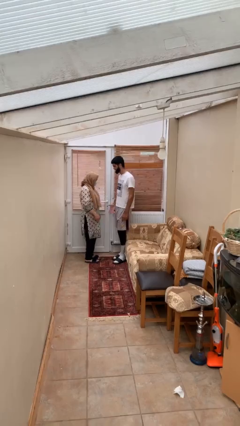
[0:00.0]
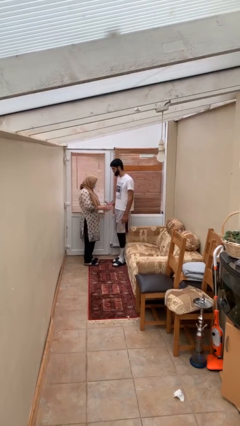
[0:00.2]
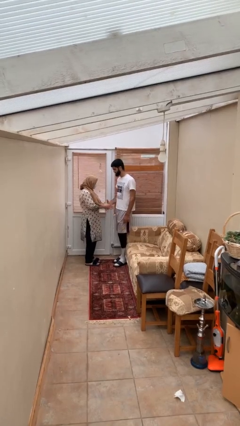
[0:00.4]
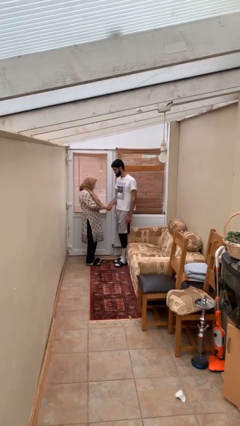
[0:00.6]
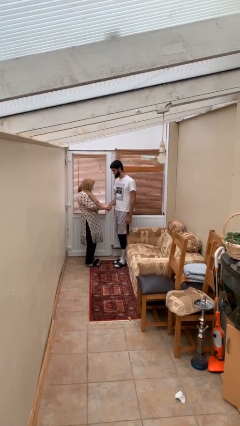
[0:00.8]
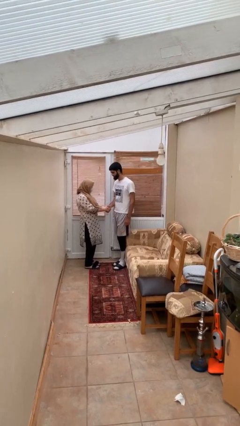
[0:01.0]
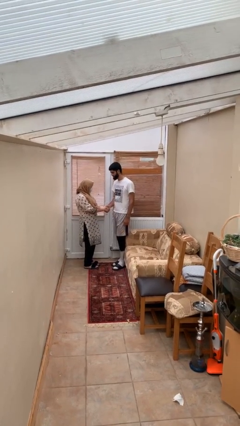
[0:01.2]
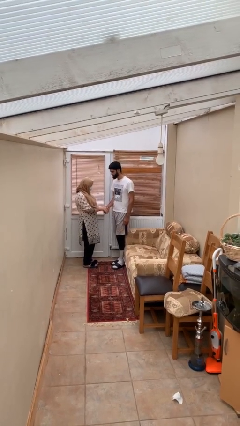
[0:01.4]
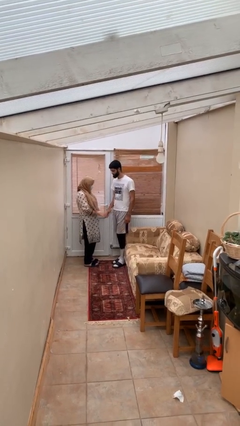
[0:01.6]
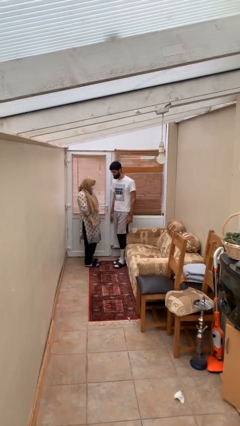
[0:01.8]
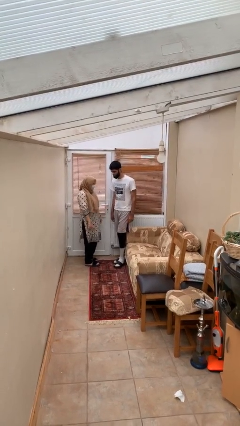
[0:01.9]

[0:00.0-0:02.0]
person shakes hand

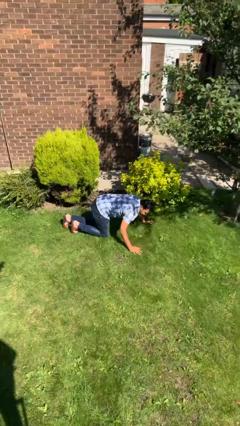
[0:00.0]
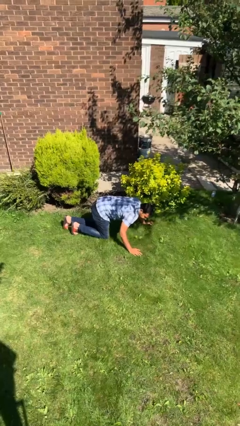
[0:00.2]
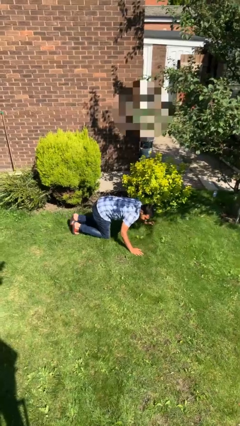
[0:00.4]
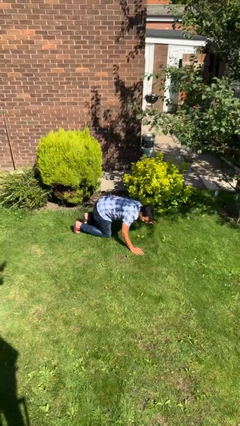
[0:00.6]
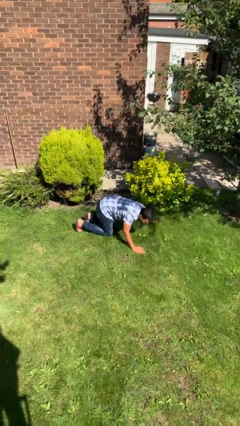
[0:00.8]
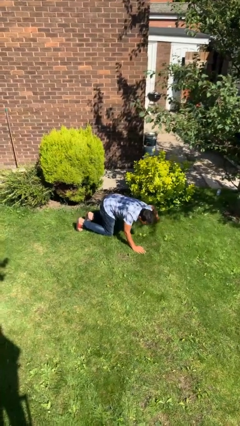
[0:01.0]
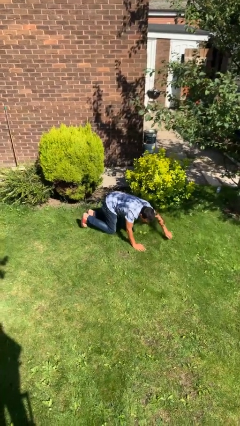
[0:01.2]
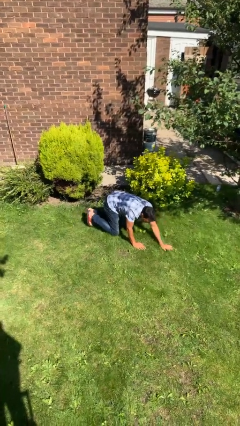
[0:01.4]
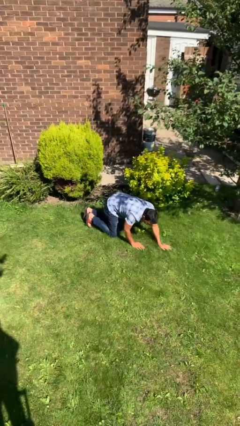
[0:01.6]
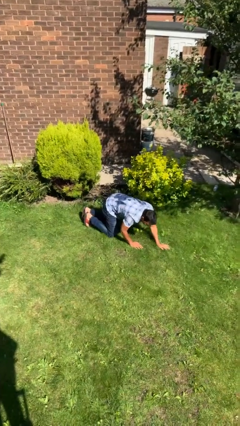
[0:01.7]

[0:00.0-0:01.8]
person crawls

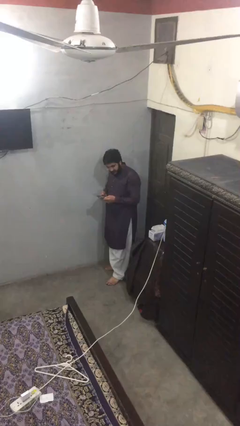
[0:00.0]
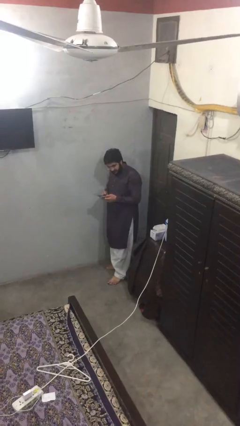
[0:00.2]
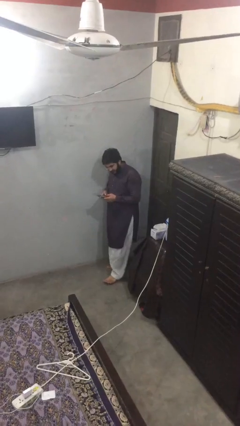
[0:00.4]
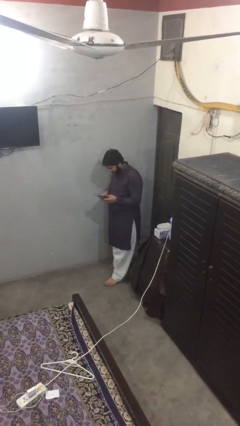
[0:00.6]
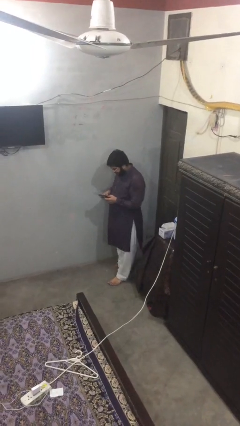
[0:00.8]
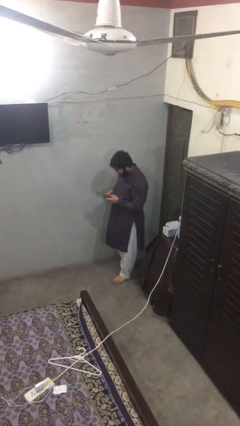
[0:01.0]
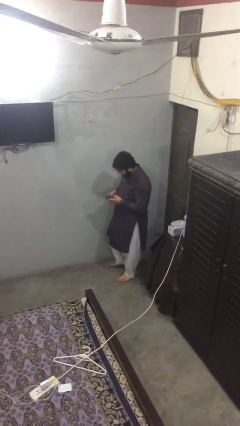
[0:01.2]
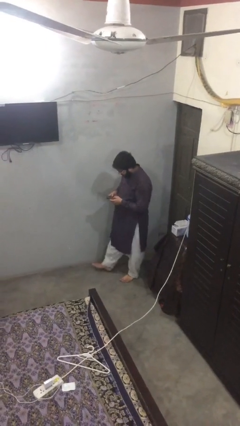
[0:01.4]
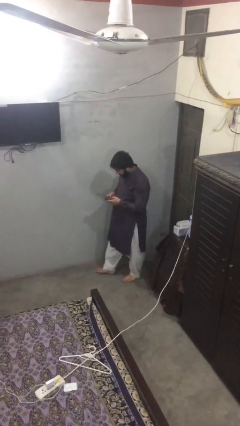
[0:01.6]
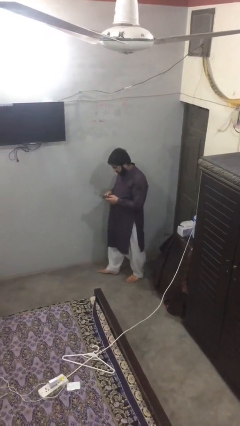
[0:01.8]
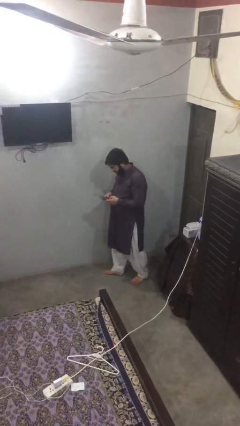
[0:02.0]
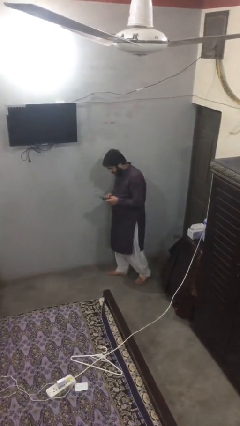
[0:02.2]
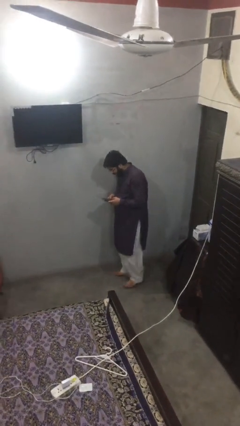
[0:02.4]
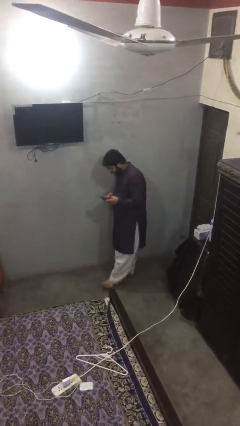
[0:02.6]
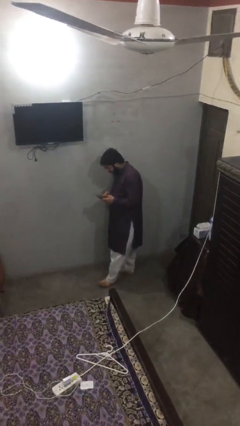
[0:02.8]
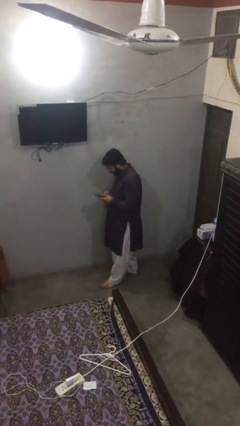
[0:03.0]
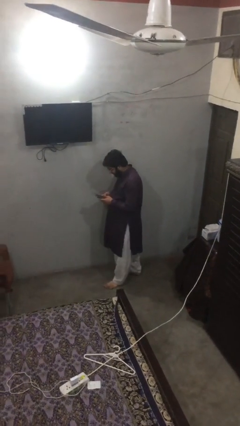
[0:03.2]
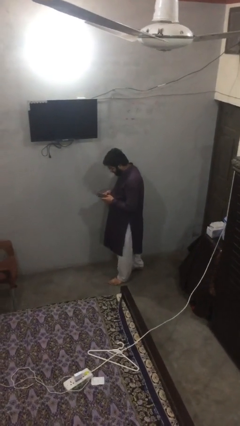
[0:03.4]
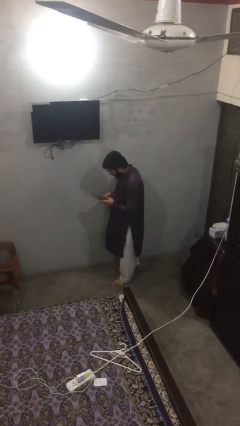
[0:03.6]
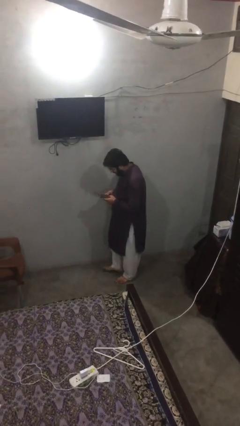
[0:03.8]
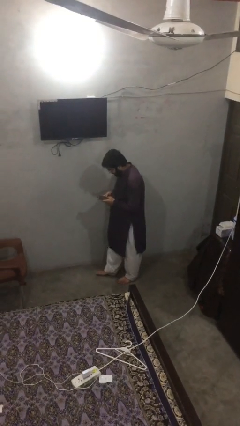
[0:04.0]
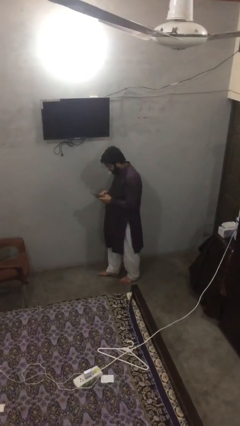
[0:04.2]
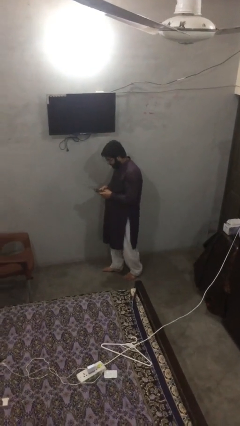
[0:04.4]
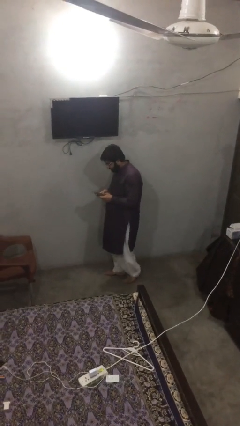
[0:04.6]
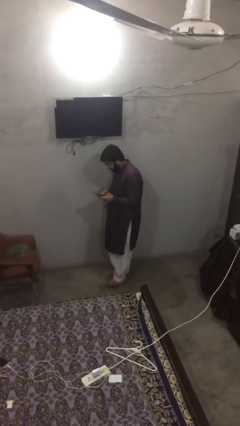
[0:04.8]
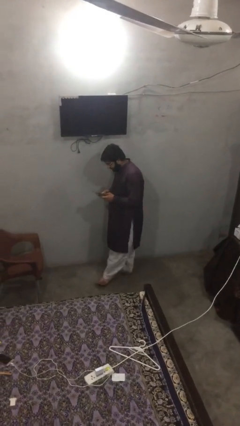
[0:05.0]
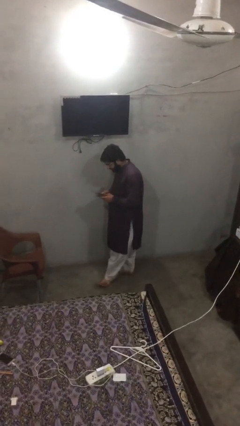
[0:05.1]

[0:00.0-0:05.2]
person texts on phone

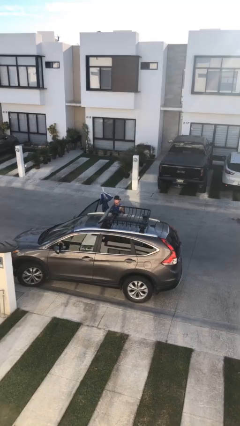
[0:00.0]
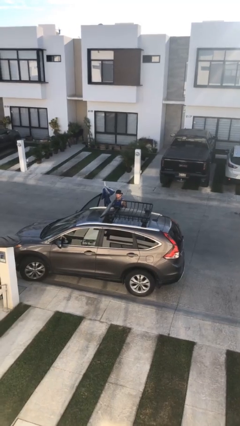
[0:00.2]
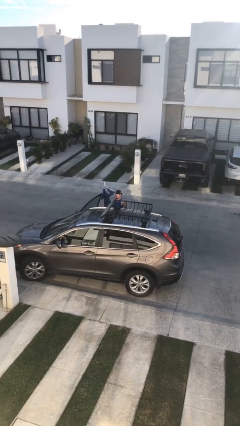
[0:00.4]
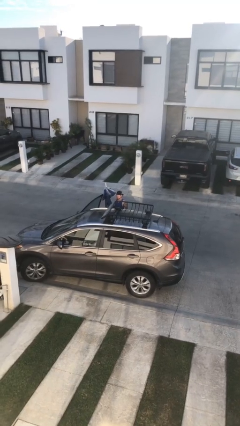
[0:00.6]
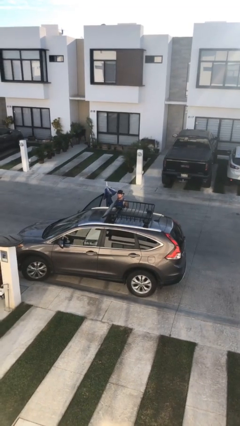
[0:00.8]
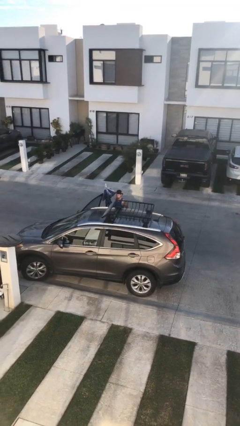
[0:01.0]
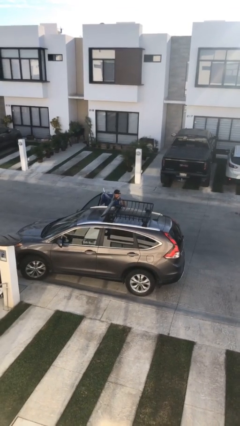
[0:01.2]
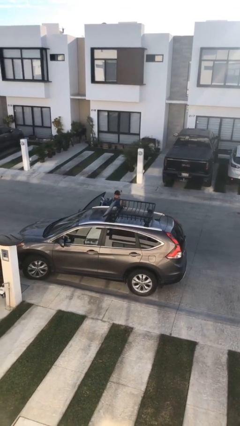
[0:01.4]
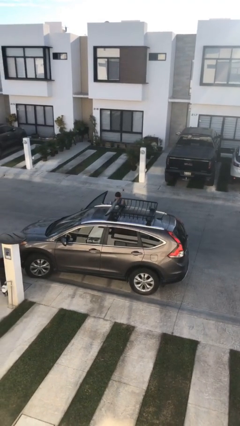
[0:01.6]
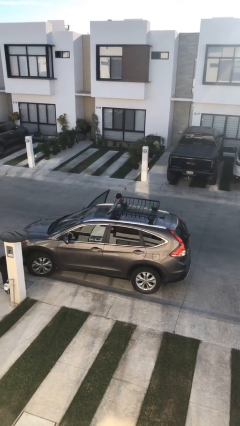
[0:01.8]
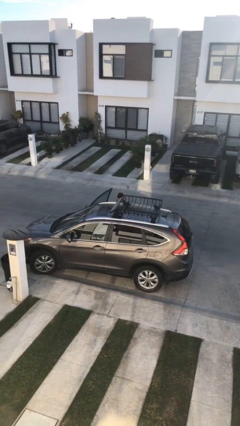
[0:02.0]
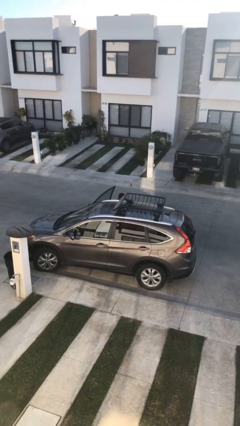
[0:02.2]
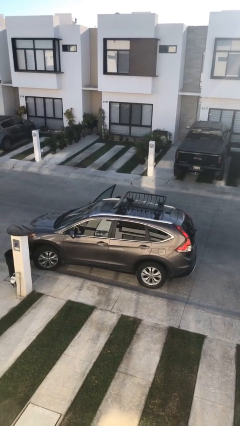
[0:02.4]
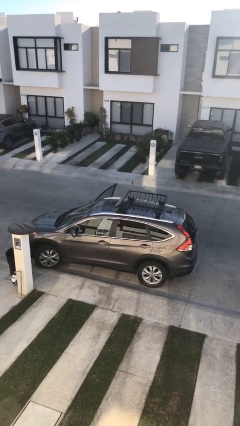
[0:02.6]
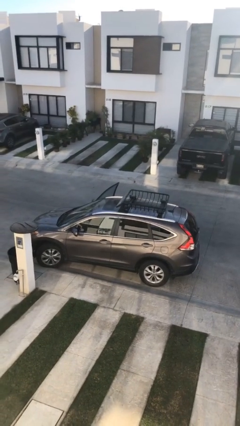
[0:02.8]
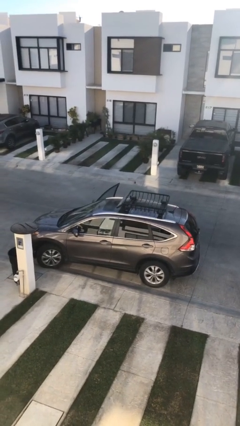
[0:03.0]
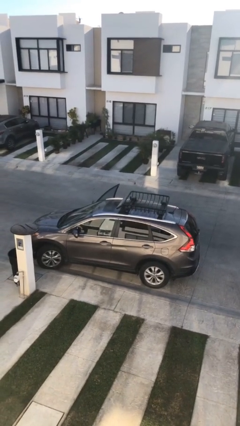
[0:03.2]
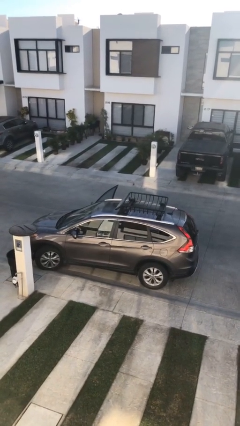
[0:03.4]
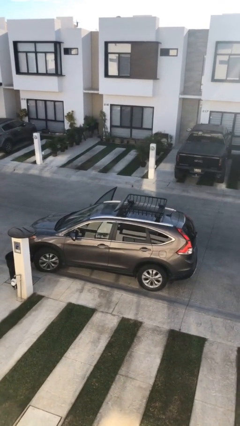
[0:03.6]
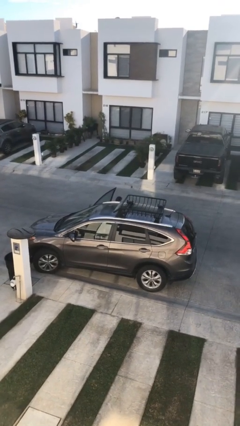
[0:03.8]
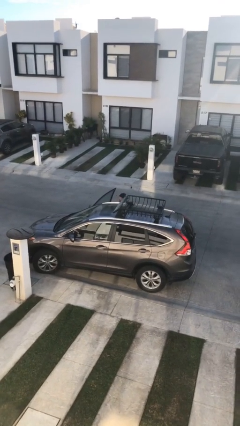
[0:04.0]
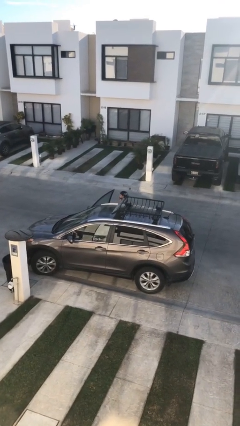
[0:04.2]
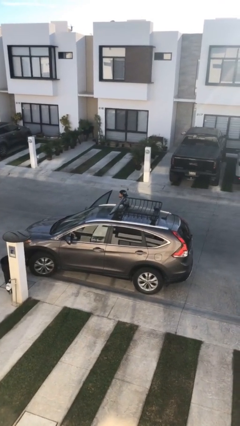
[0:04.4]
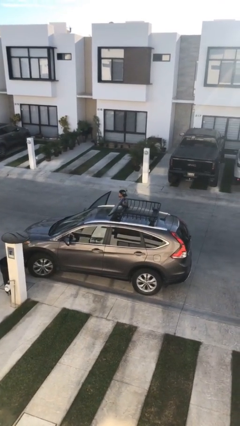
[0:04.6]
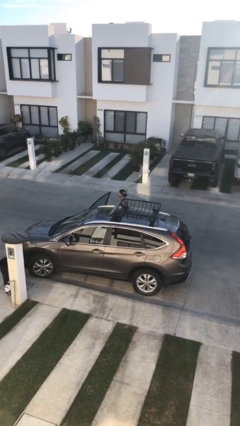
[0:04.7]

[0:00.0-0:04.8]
person loads car

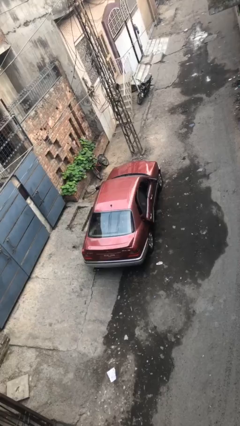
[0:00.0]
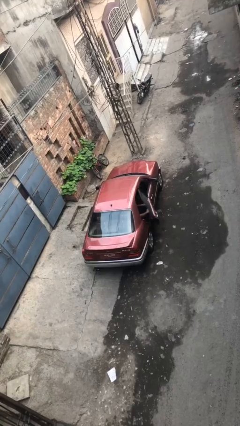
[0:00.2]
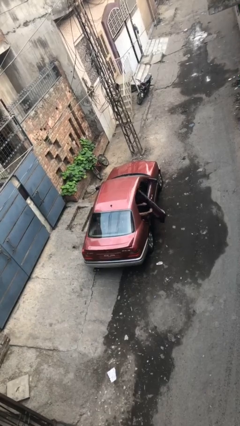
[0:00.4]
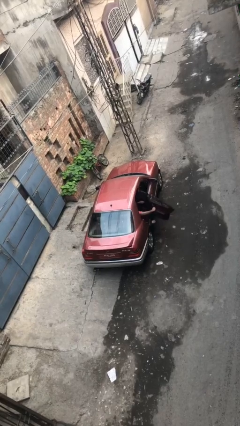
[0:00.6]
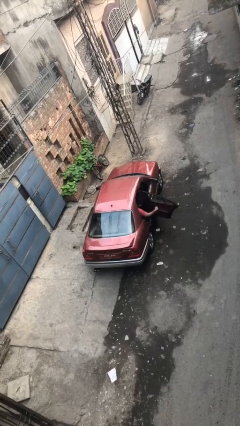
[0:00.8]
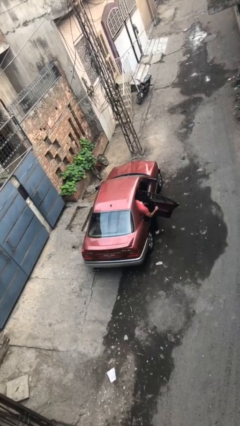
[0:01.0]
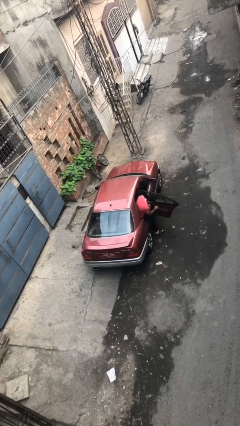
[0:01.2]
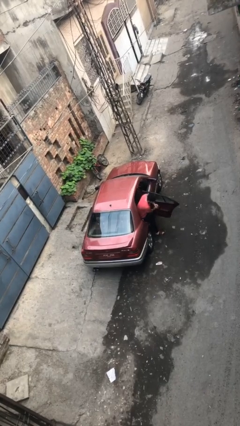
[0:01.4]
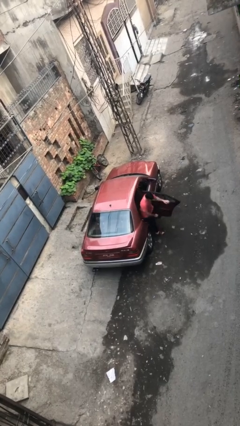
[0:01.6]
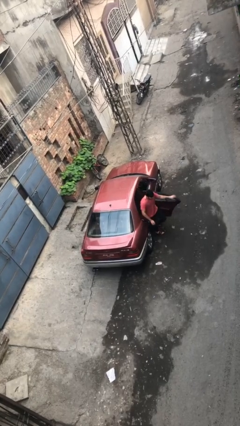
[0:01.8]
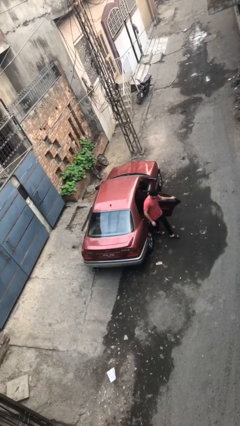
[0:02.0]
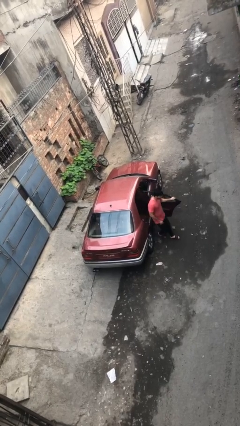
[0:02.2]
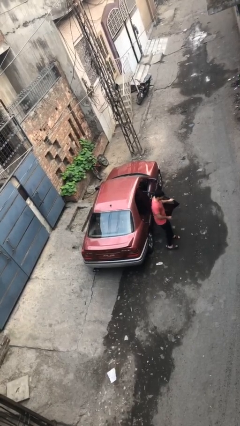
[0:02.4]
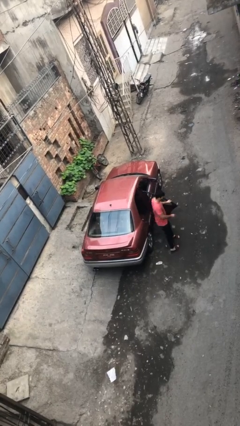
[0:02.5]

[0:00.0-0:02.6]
car drops off person

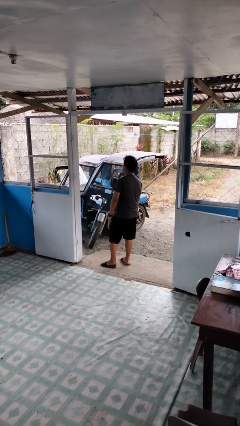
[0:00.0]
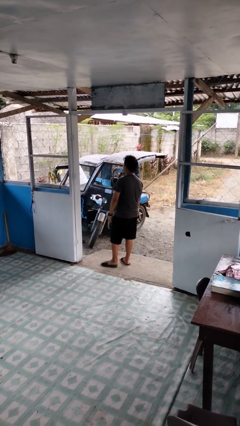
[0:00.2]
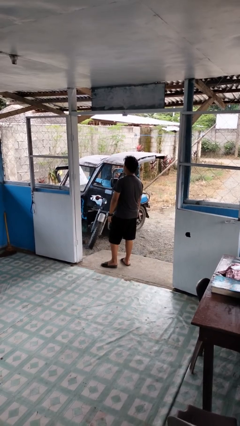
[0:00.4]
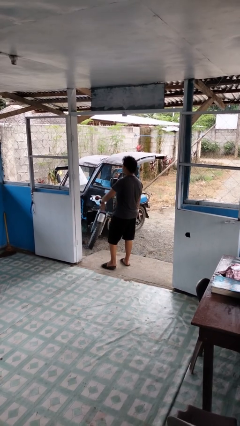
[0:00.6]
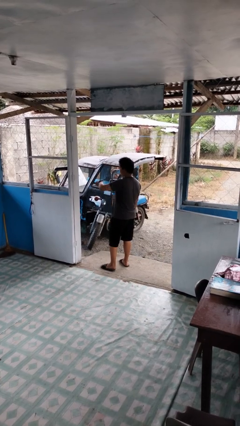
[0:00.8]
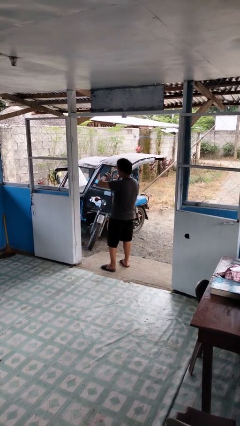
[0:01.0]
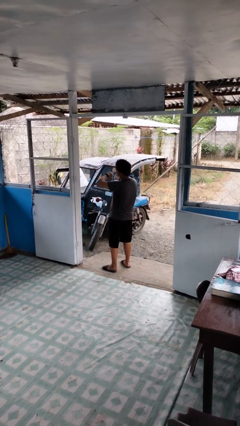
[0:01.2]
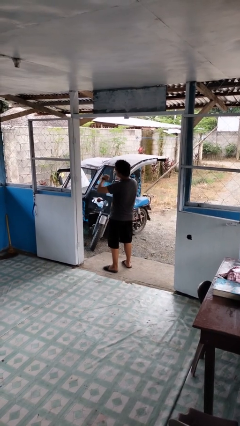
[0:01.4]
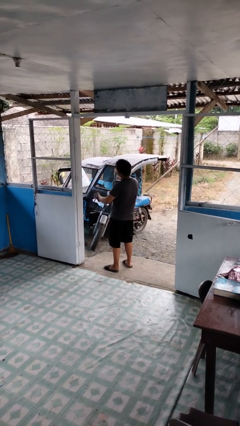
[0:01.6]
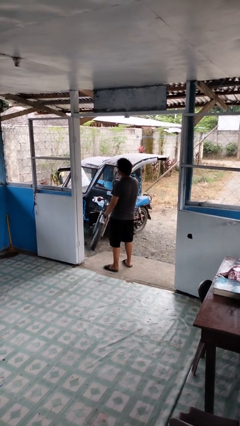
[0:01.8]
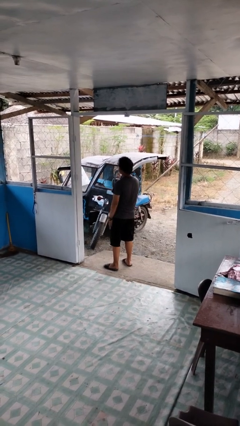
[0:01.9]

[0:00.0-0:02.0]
person looks at wristwatch
